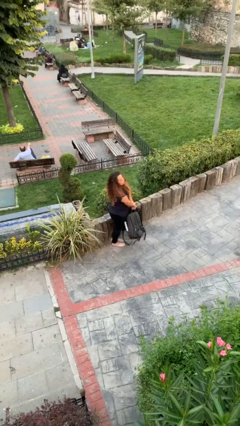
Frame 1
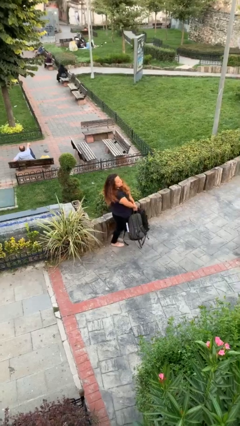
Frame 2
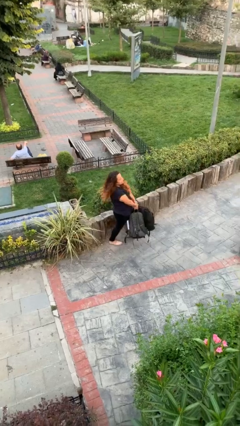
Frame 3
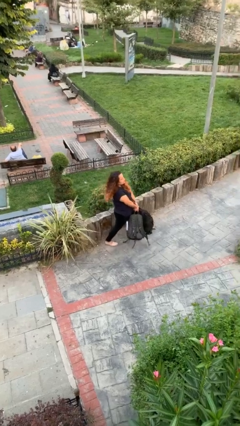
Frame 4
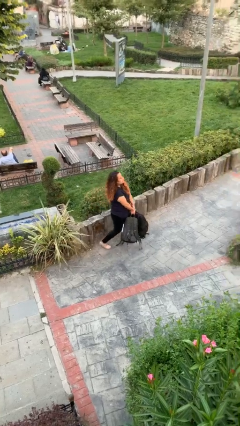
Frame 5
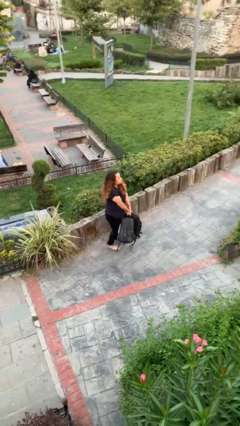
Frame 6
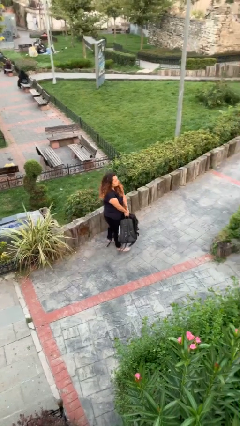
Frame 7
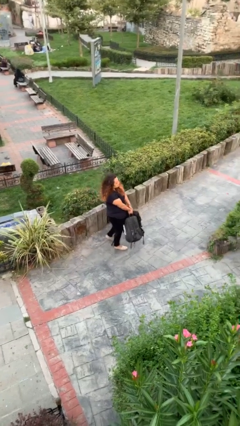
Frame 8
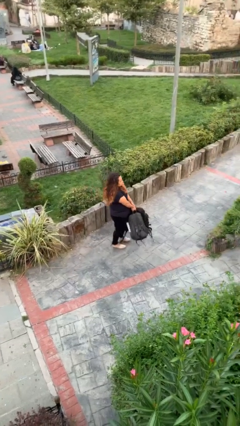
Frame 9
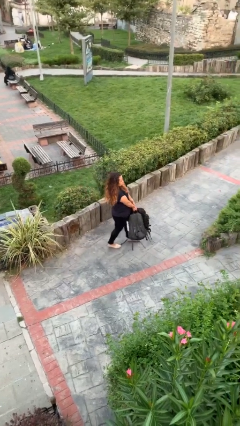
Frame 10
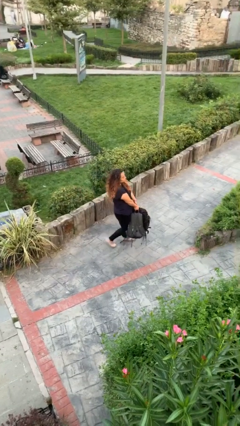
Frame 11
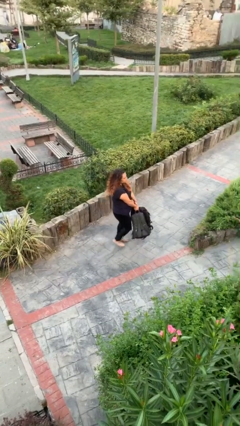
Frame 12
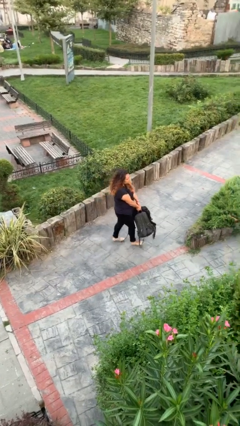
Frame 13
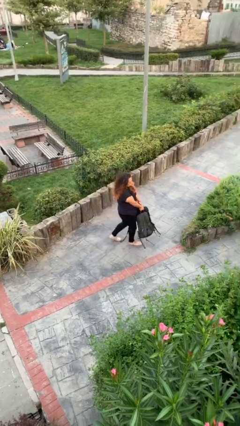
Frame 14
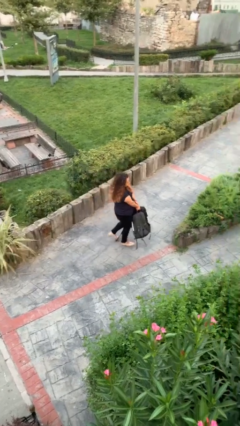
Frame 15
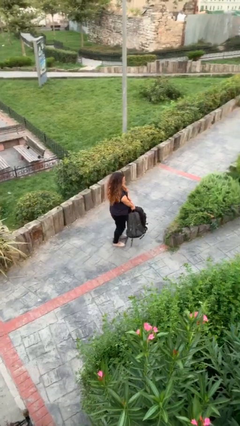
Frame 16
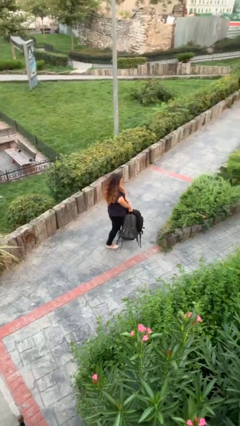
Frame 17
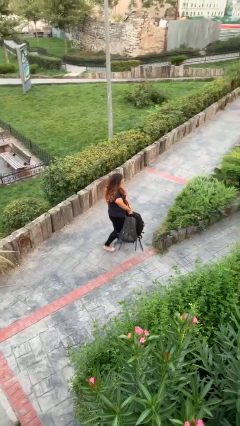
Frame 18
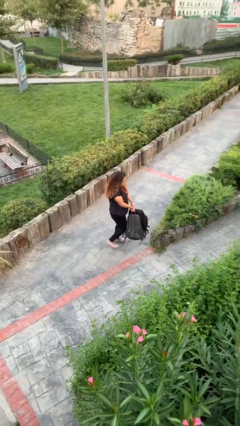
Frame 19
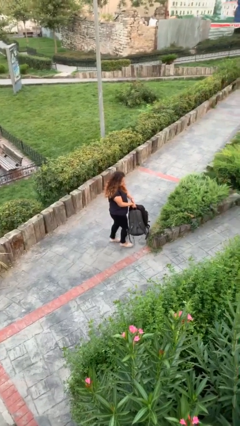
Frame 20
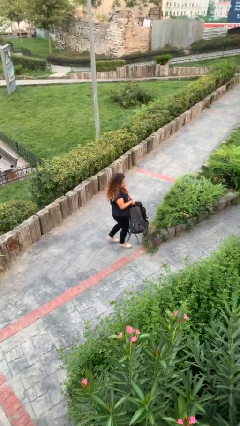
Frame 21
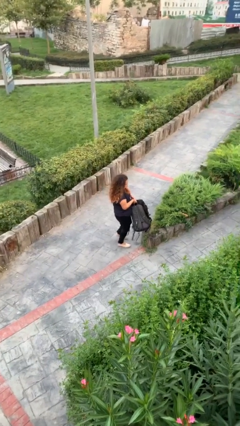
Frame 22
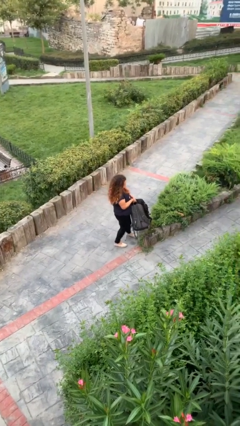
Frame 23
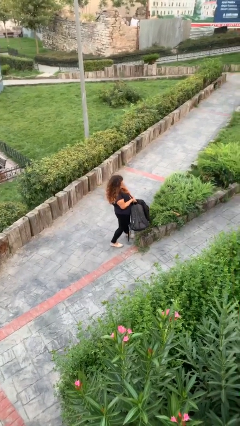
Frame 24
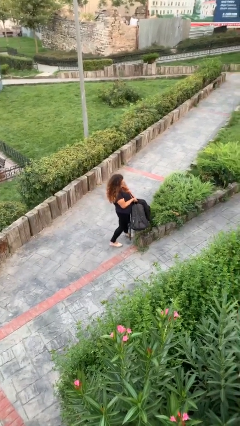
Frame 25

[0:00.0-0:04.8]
person carries heavy object

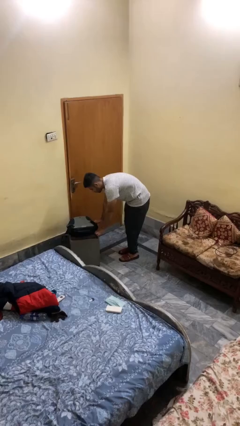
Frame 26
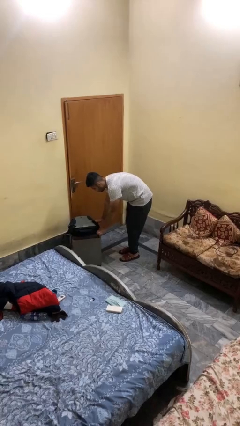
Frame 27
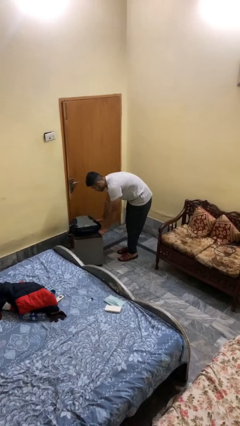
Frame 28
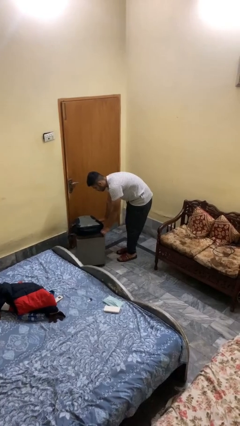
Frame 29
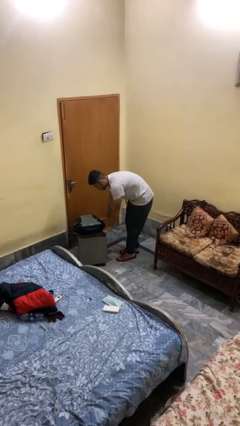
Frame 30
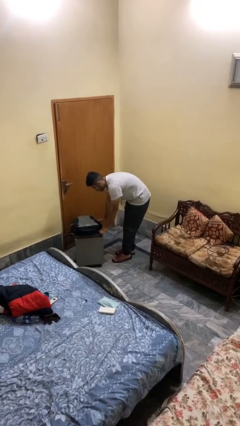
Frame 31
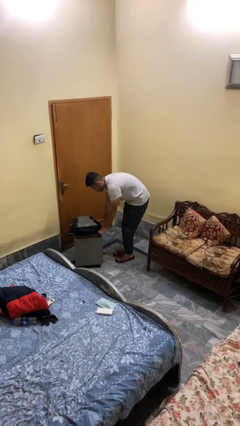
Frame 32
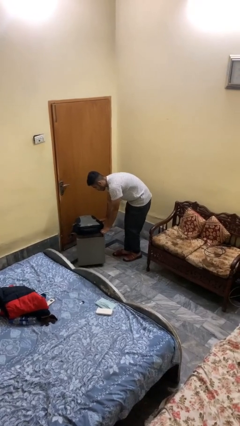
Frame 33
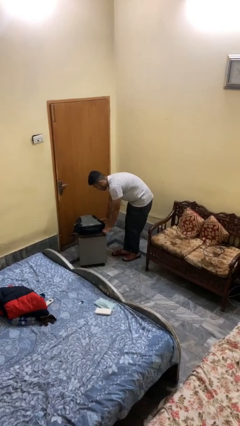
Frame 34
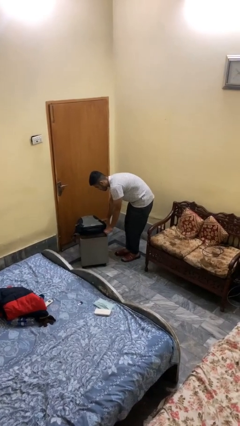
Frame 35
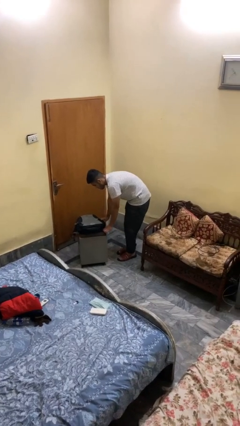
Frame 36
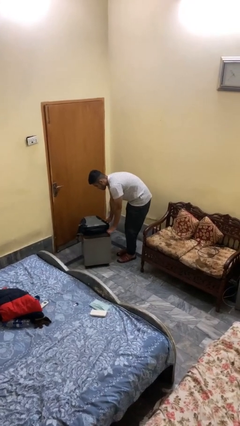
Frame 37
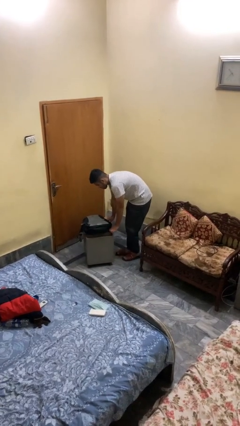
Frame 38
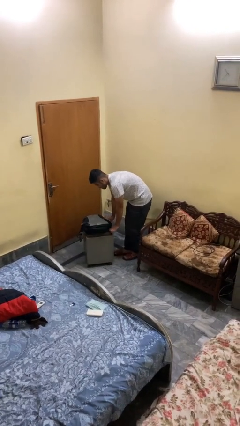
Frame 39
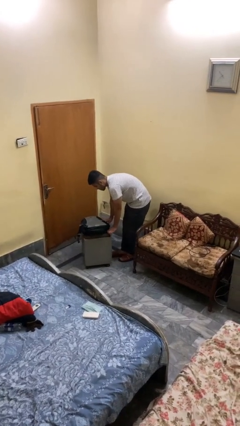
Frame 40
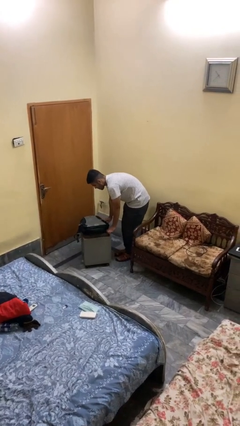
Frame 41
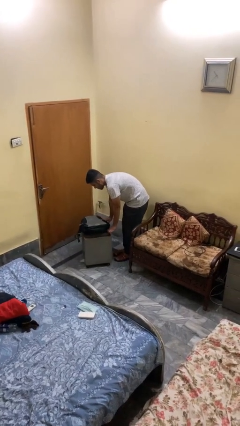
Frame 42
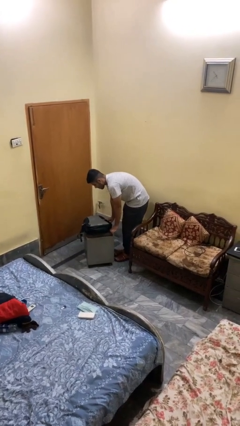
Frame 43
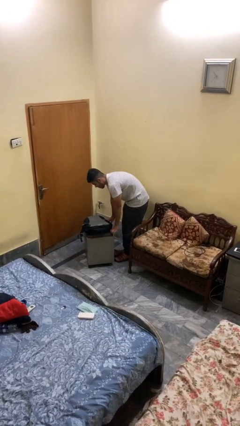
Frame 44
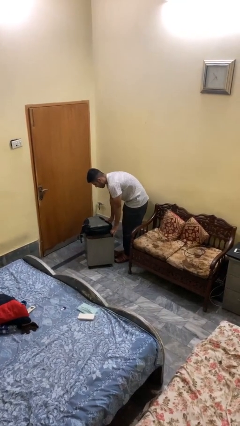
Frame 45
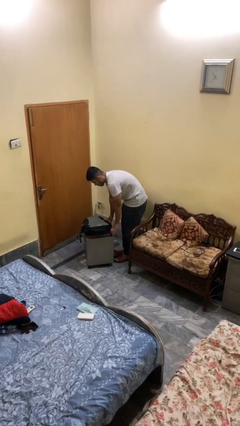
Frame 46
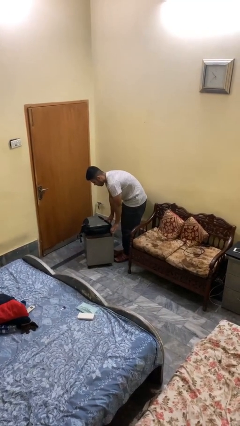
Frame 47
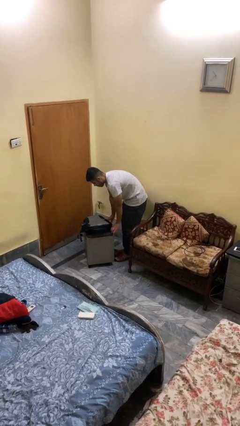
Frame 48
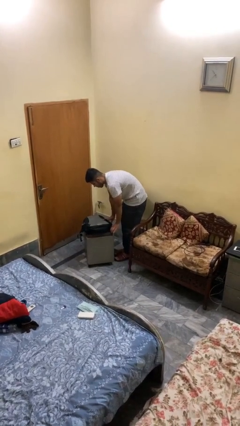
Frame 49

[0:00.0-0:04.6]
person pulls wheeled cart

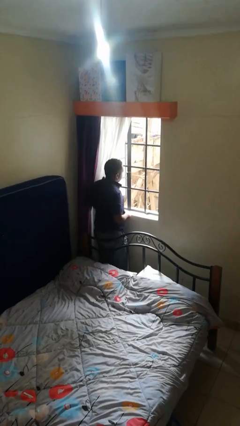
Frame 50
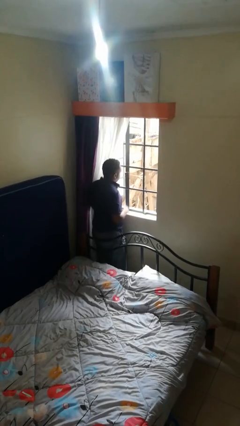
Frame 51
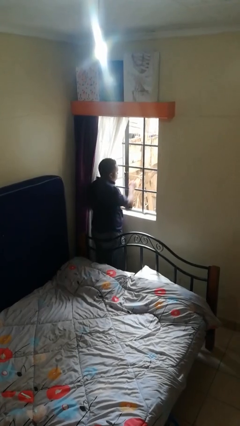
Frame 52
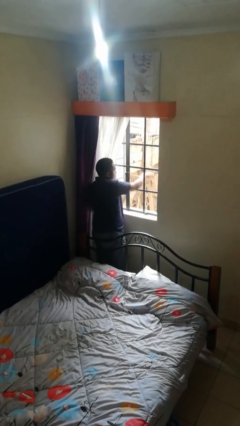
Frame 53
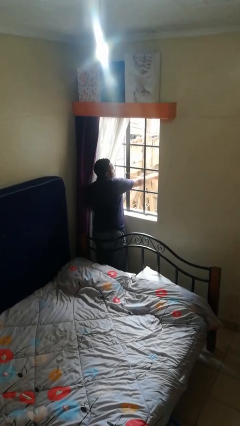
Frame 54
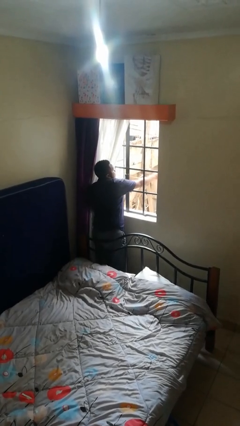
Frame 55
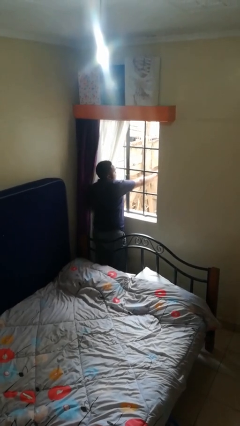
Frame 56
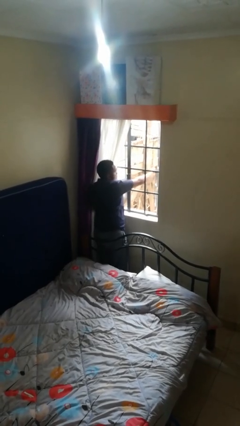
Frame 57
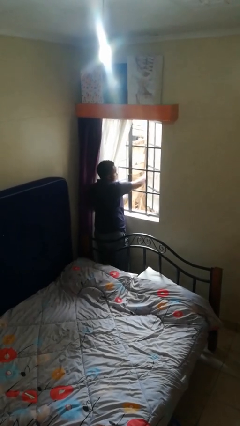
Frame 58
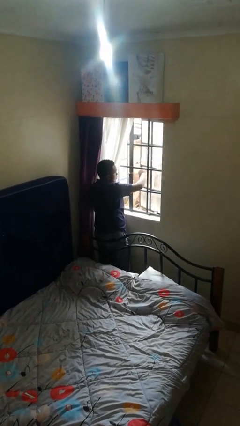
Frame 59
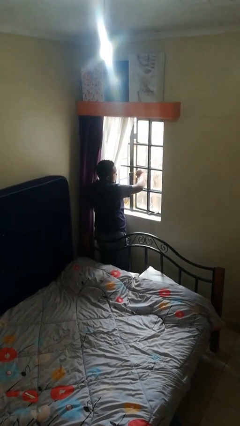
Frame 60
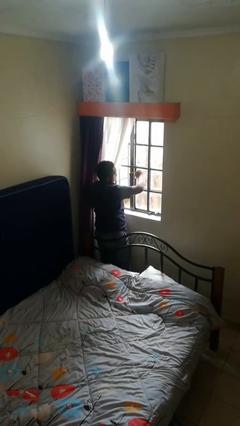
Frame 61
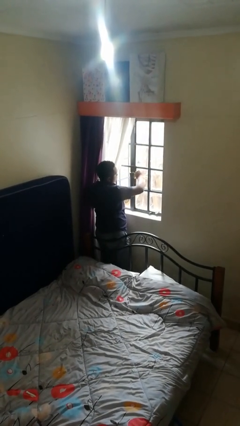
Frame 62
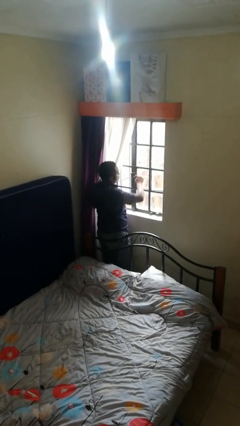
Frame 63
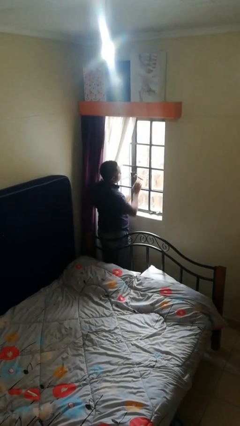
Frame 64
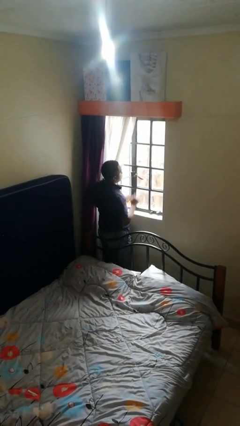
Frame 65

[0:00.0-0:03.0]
person closes home window

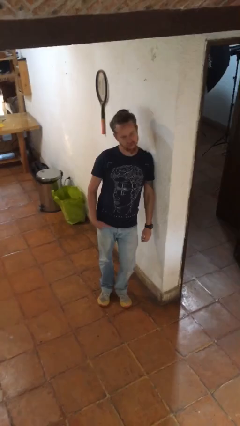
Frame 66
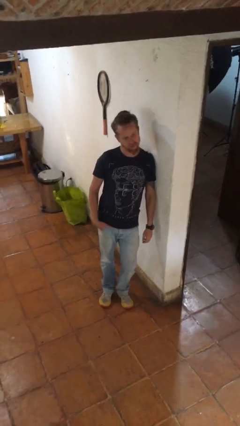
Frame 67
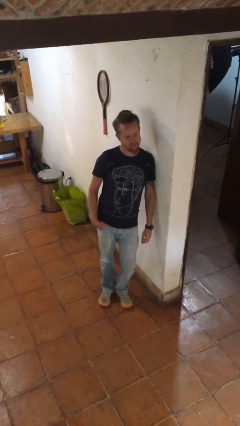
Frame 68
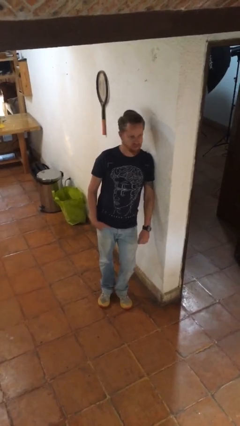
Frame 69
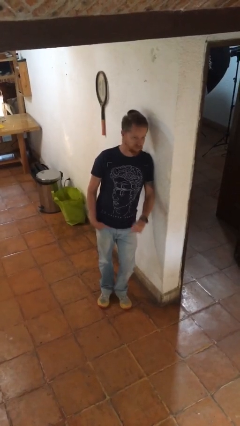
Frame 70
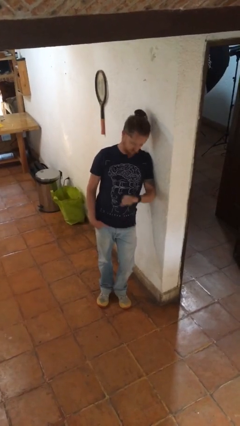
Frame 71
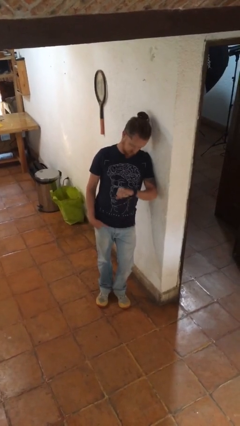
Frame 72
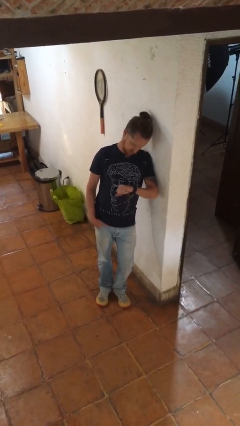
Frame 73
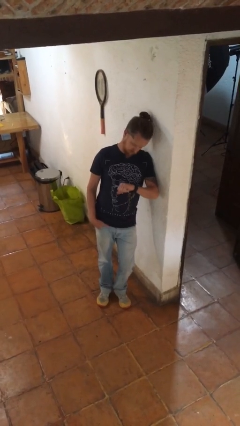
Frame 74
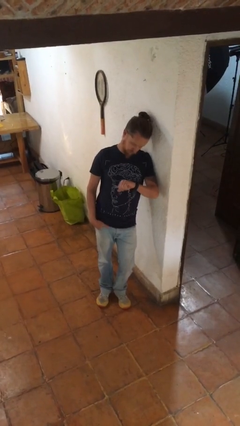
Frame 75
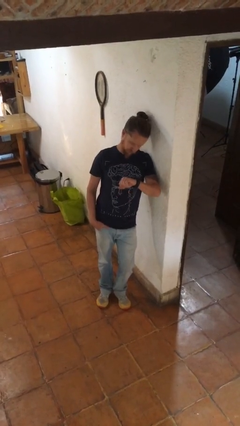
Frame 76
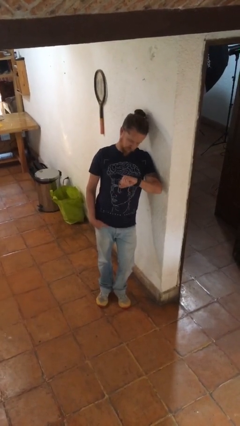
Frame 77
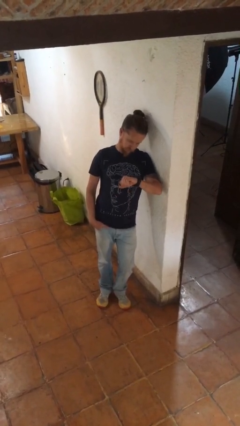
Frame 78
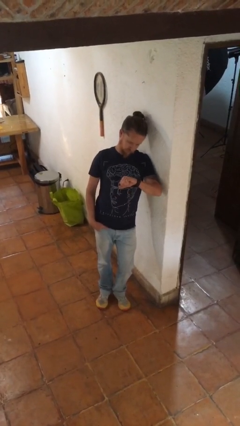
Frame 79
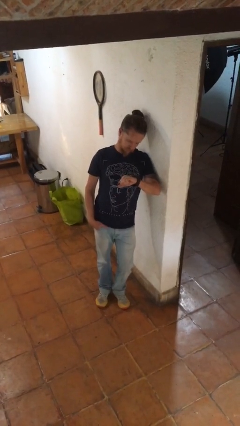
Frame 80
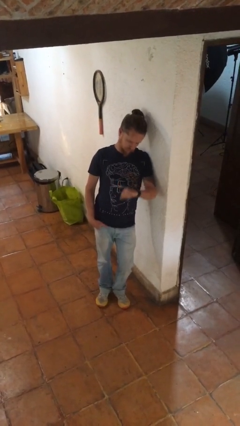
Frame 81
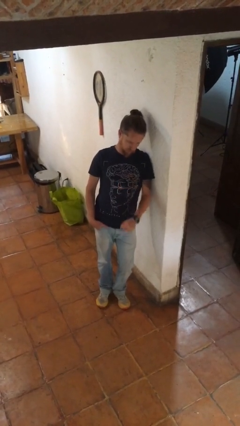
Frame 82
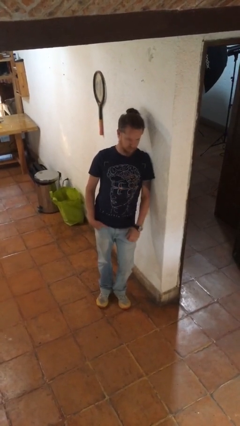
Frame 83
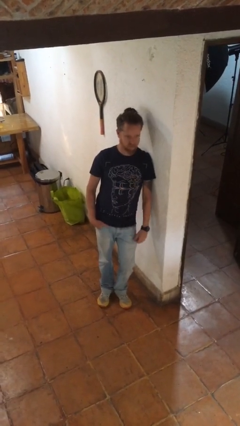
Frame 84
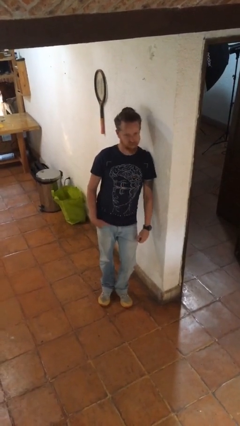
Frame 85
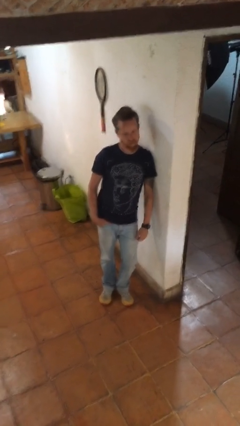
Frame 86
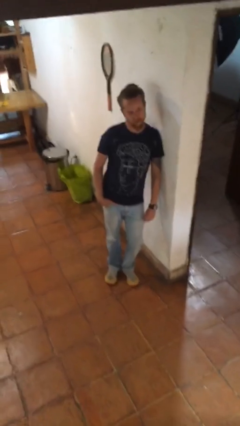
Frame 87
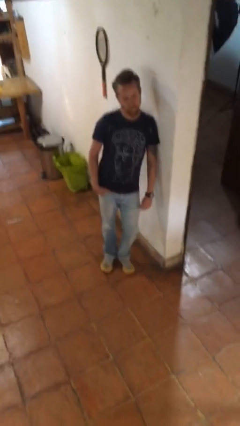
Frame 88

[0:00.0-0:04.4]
person looks at wristwatch

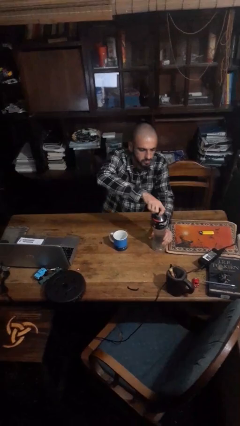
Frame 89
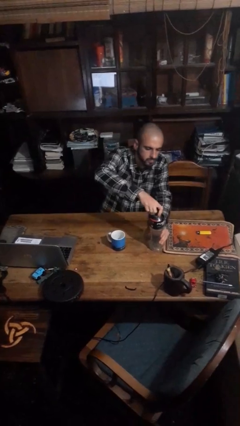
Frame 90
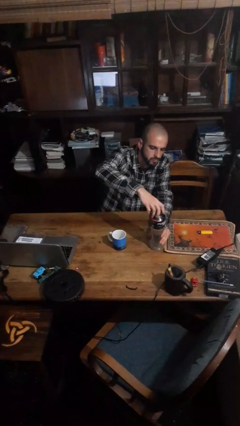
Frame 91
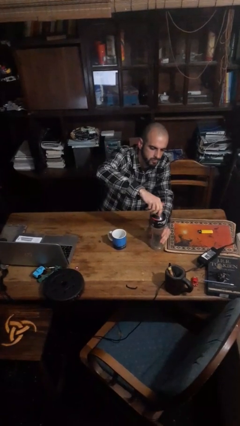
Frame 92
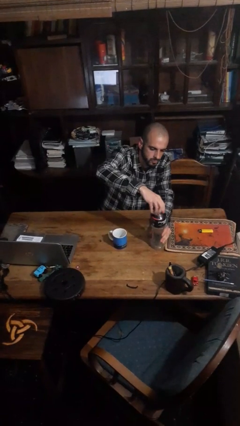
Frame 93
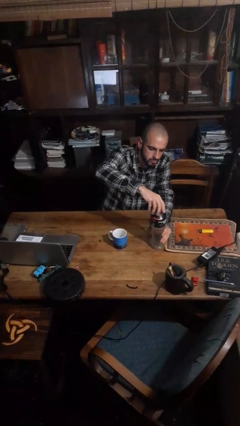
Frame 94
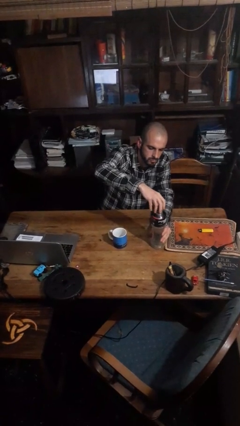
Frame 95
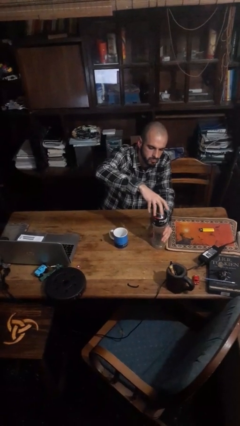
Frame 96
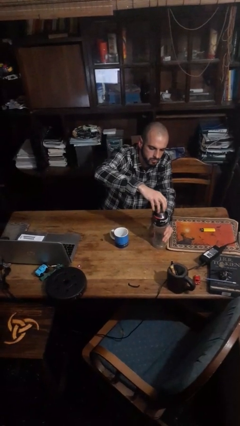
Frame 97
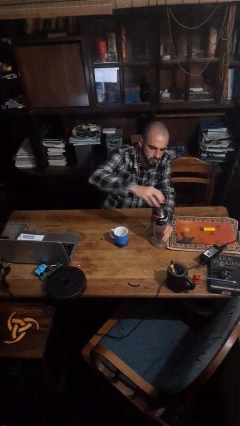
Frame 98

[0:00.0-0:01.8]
person unscrews lid from bottle
